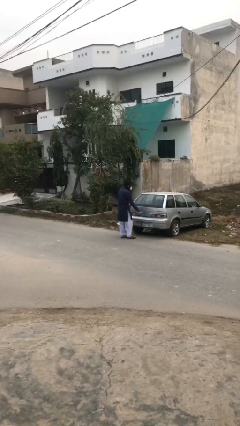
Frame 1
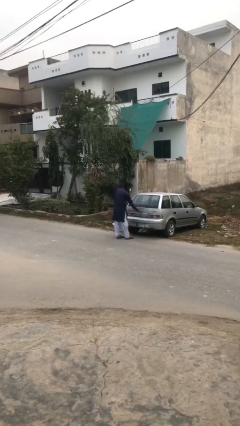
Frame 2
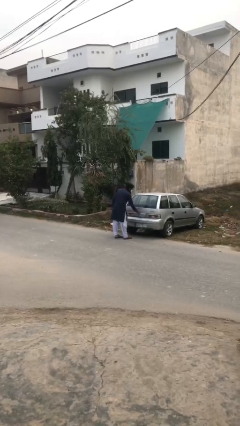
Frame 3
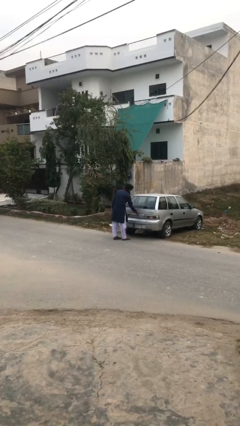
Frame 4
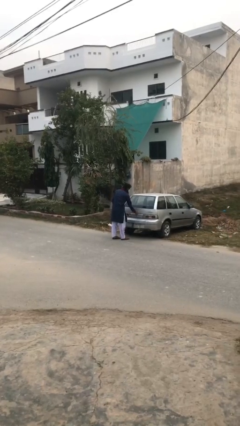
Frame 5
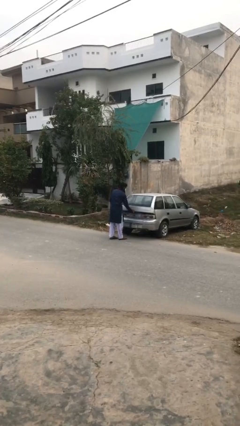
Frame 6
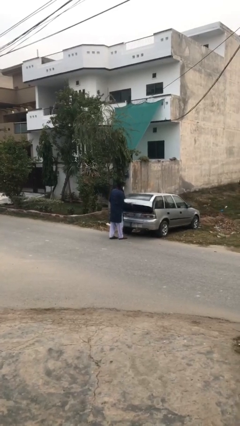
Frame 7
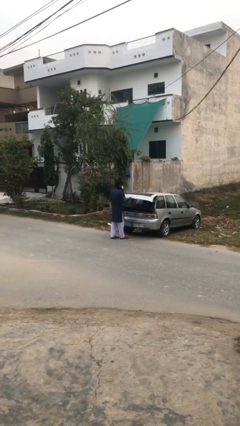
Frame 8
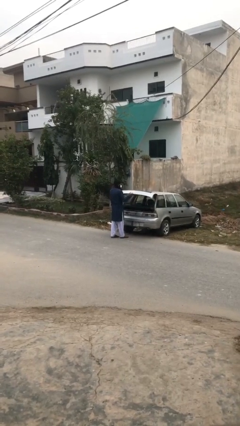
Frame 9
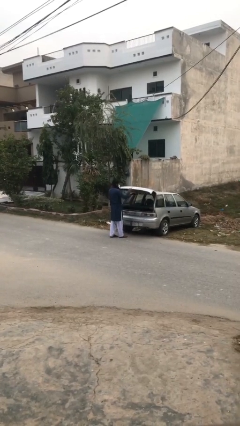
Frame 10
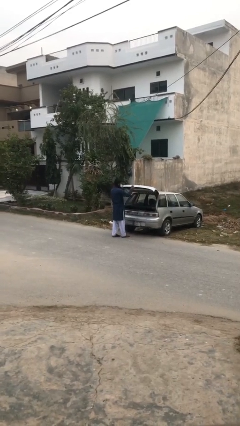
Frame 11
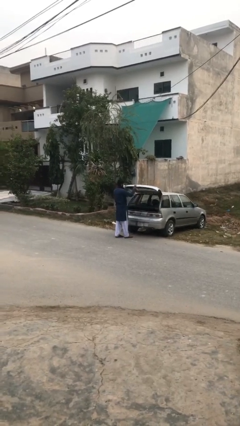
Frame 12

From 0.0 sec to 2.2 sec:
person opens car trunk

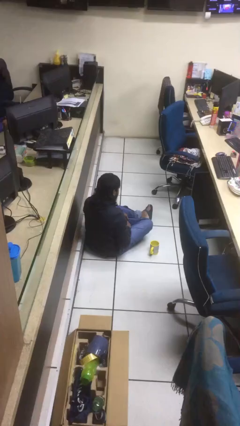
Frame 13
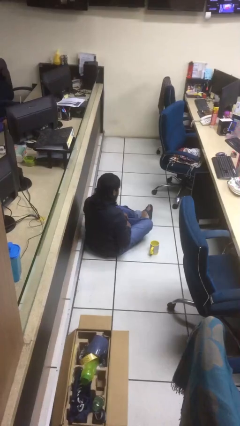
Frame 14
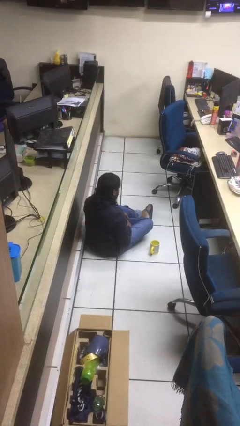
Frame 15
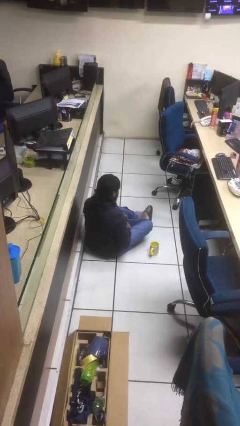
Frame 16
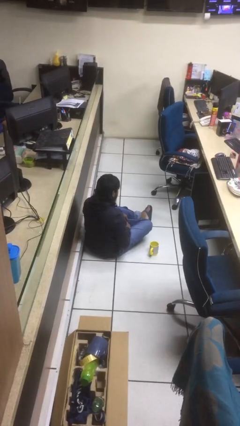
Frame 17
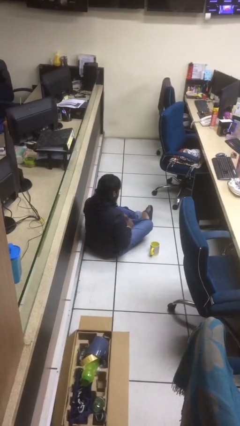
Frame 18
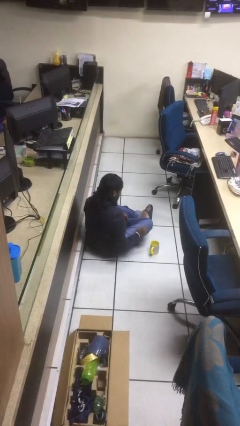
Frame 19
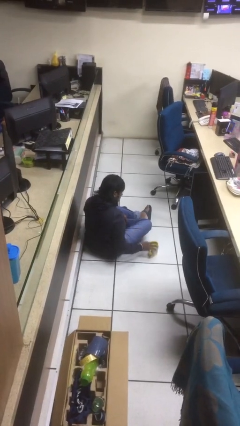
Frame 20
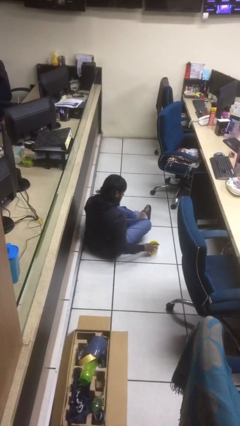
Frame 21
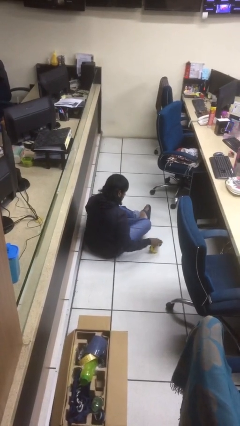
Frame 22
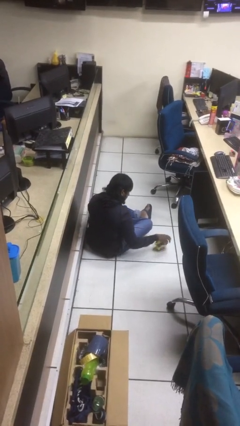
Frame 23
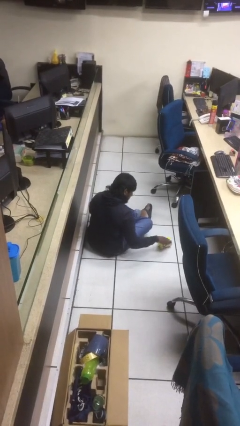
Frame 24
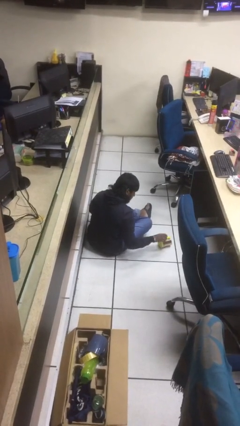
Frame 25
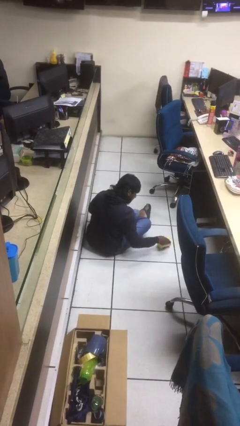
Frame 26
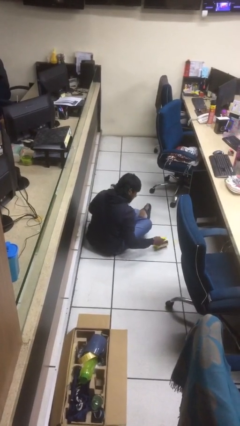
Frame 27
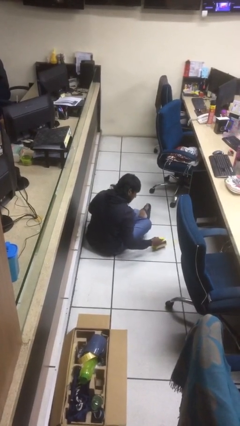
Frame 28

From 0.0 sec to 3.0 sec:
person spills on floor

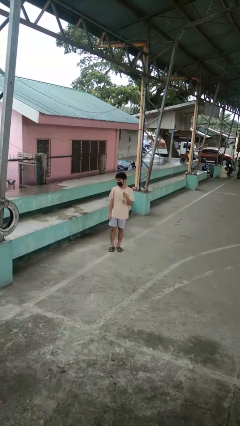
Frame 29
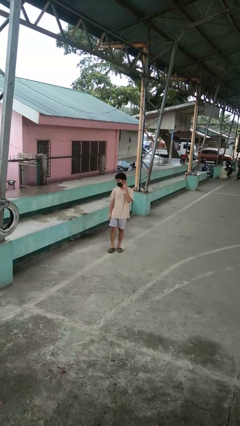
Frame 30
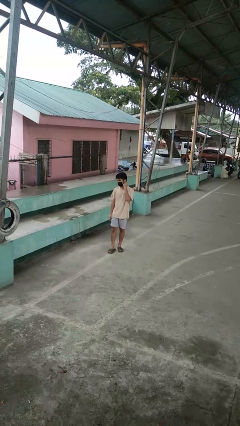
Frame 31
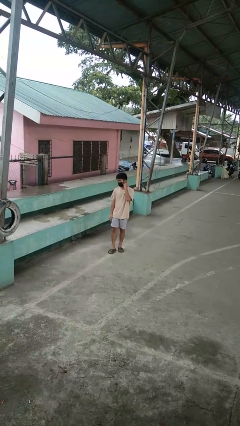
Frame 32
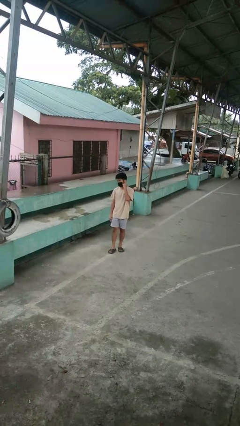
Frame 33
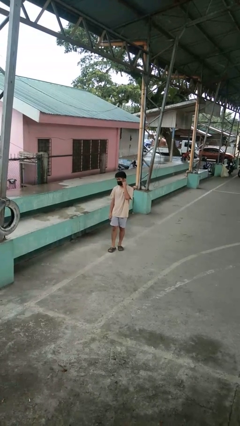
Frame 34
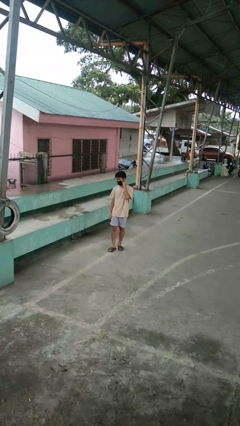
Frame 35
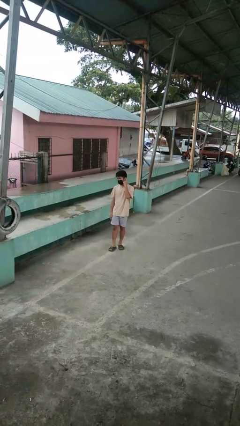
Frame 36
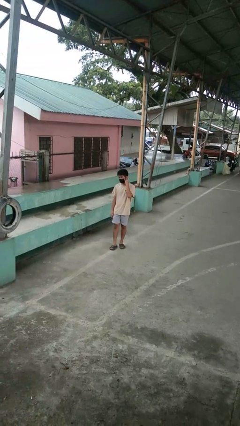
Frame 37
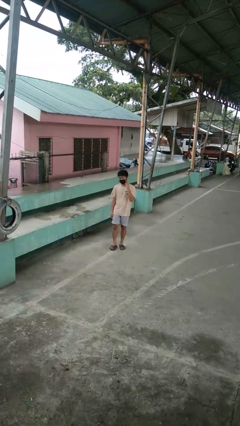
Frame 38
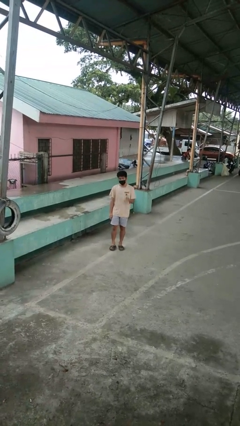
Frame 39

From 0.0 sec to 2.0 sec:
person gestures listen closely

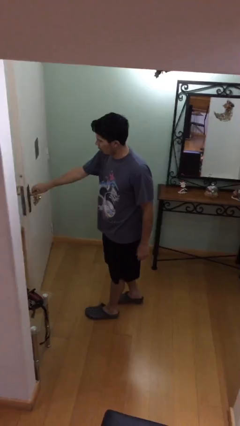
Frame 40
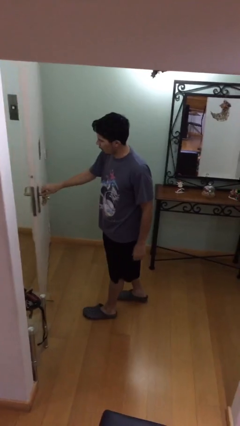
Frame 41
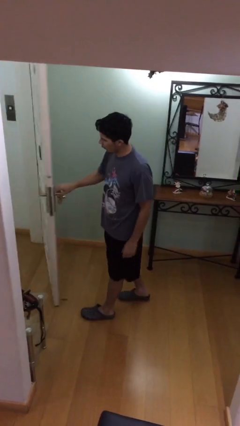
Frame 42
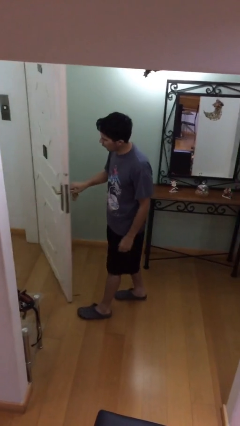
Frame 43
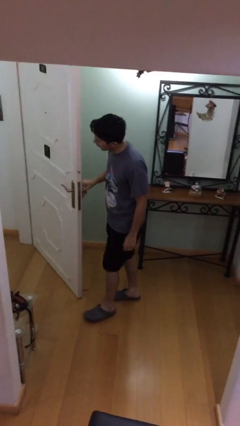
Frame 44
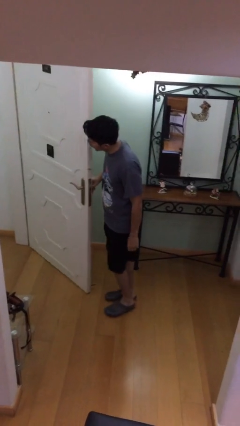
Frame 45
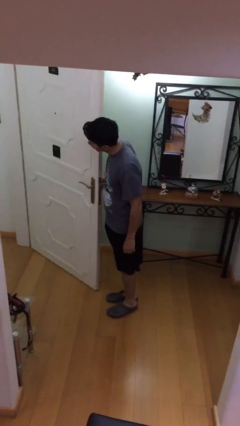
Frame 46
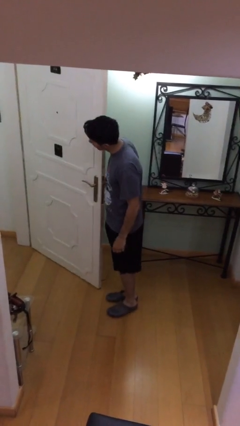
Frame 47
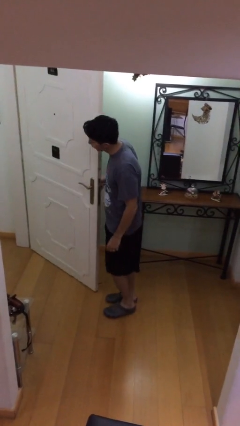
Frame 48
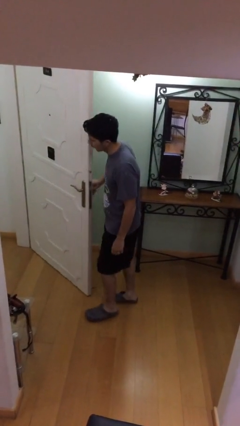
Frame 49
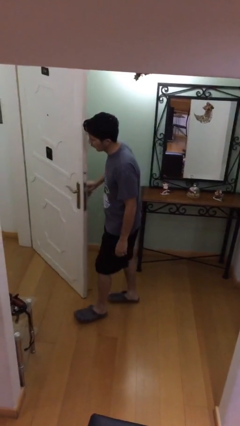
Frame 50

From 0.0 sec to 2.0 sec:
person opens facility door

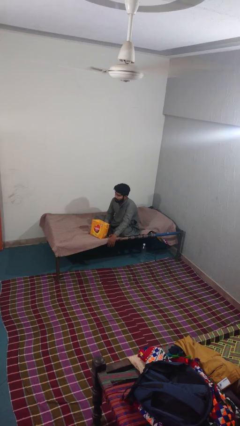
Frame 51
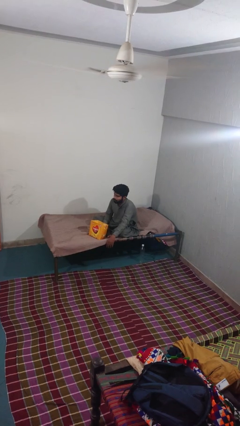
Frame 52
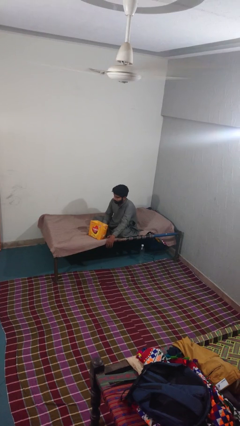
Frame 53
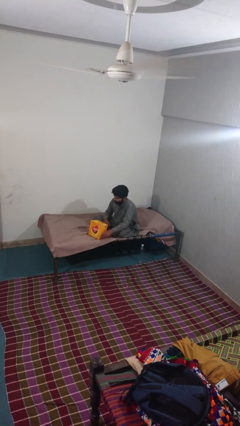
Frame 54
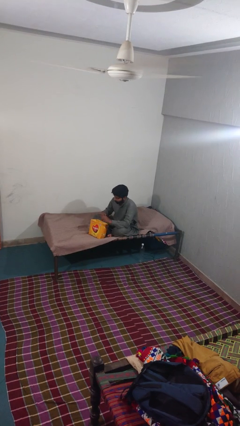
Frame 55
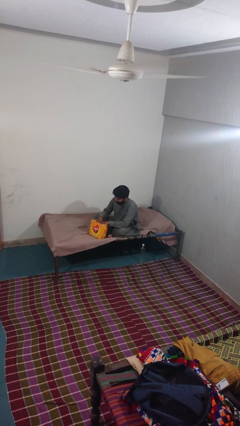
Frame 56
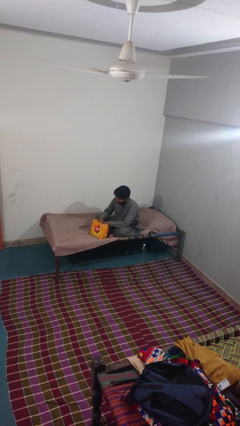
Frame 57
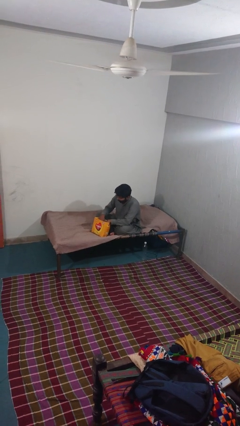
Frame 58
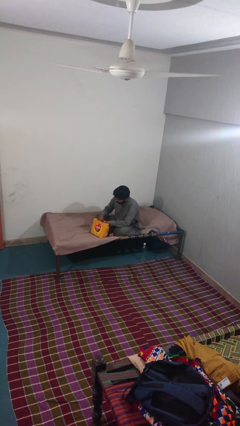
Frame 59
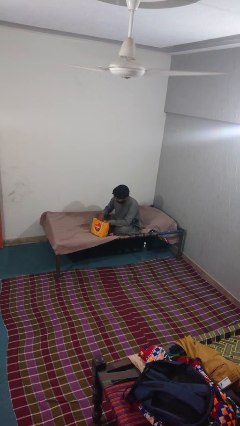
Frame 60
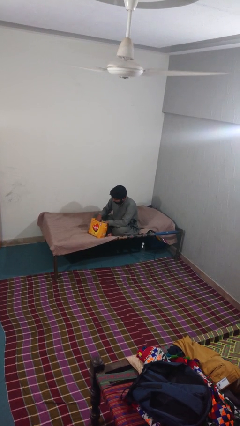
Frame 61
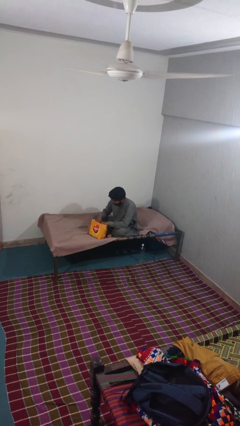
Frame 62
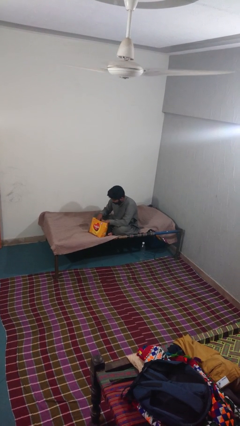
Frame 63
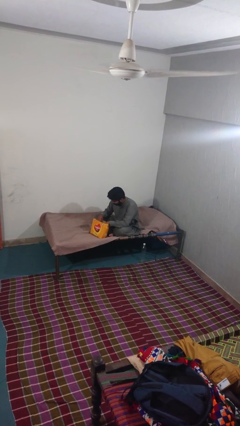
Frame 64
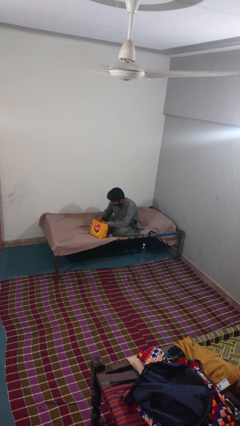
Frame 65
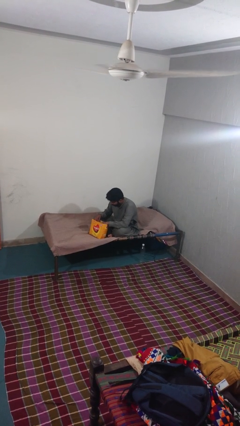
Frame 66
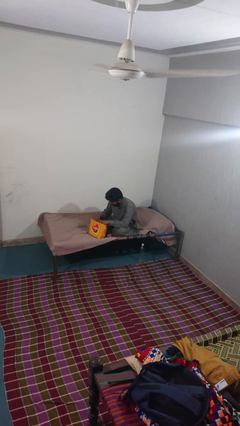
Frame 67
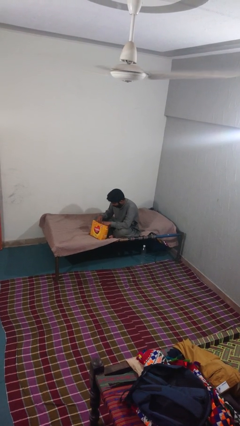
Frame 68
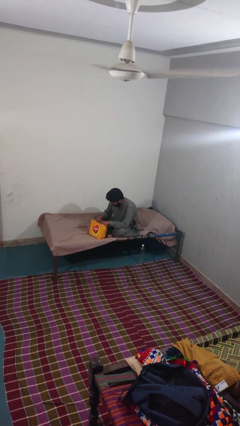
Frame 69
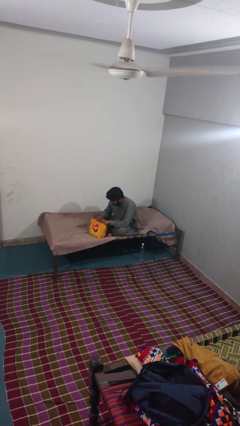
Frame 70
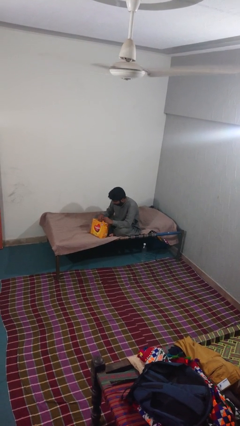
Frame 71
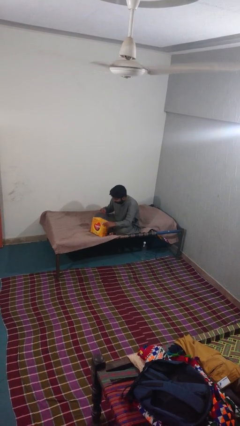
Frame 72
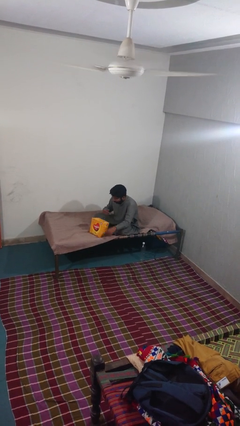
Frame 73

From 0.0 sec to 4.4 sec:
person searches in box

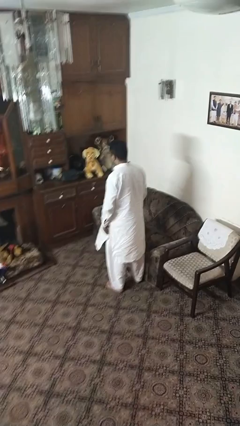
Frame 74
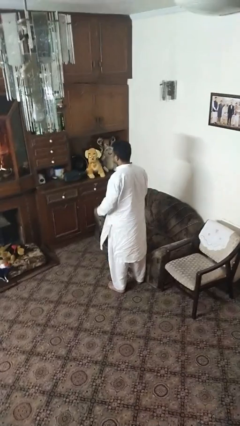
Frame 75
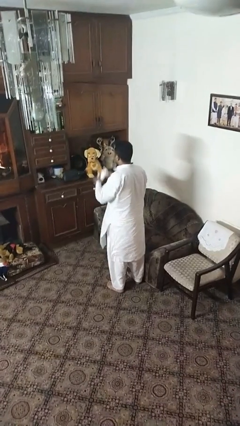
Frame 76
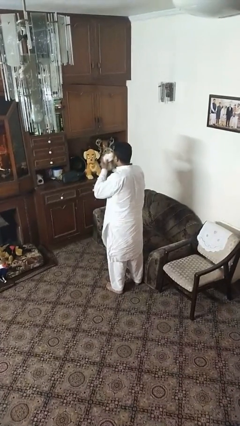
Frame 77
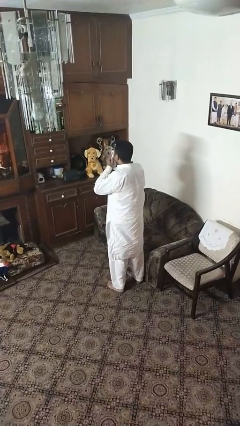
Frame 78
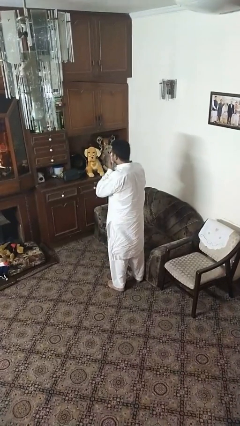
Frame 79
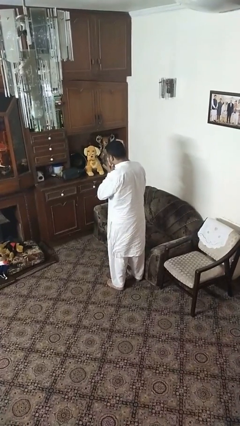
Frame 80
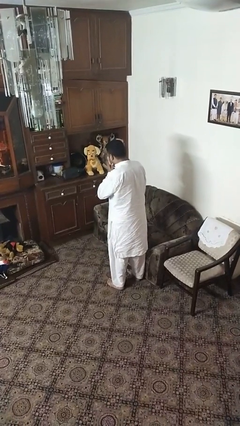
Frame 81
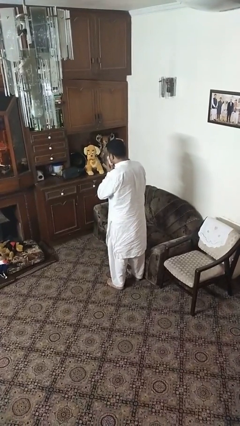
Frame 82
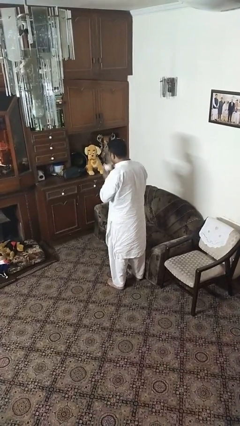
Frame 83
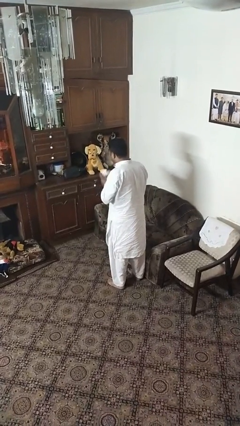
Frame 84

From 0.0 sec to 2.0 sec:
person blows nose

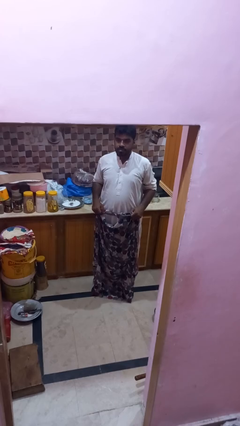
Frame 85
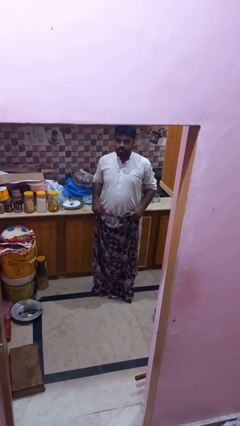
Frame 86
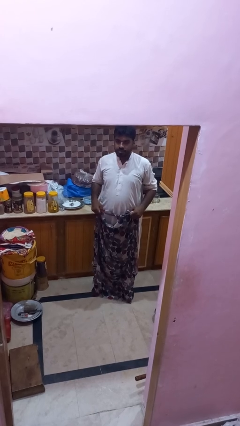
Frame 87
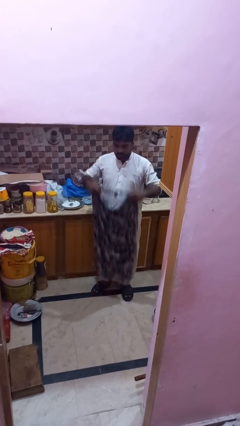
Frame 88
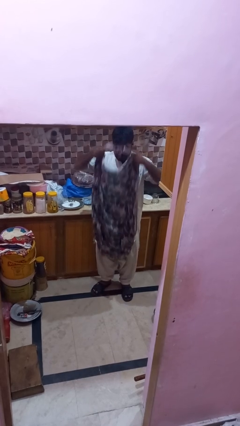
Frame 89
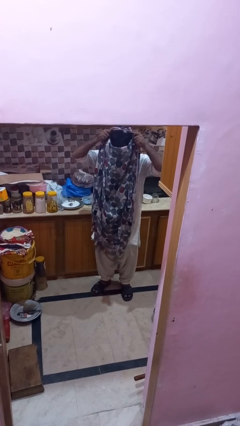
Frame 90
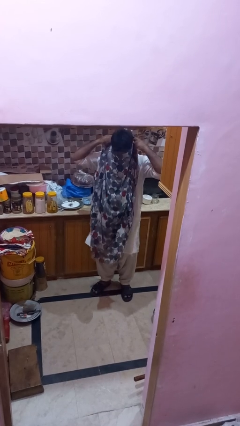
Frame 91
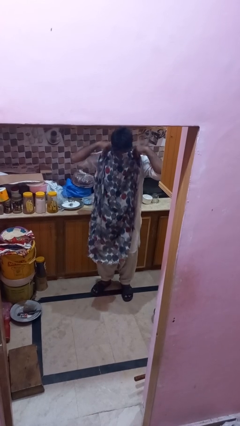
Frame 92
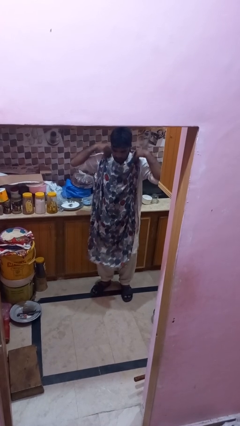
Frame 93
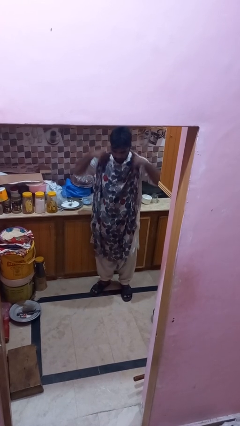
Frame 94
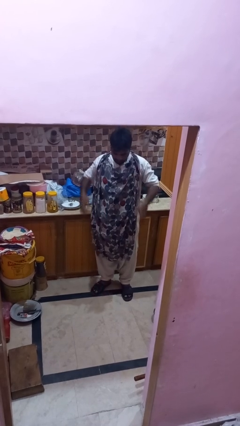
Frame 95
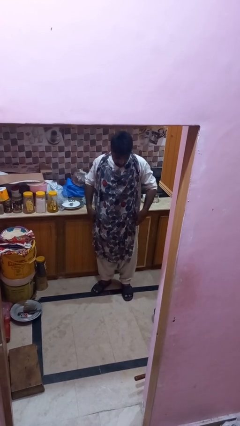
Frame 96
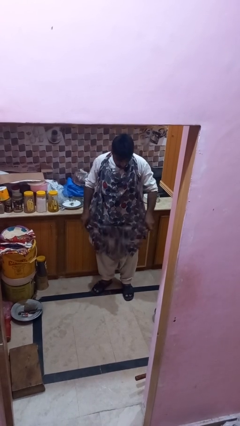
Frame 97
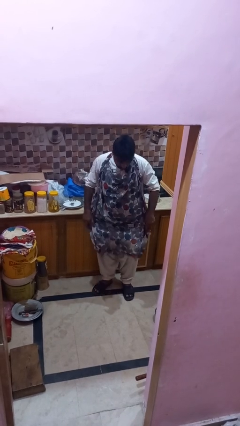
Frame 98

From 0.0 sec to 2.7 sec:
person puts on apron
